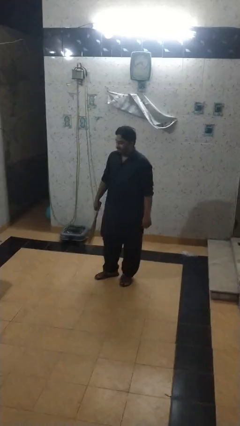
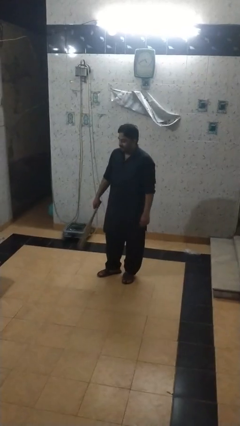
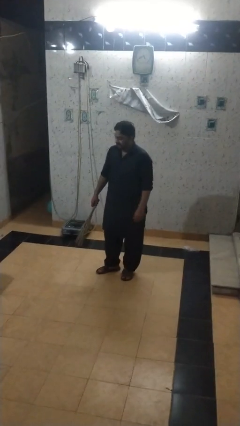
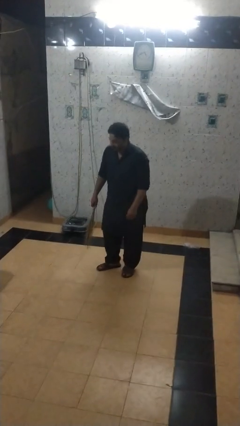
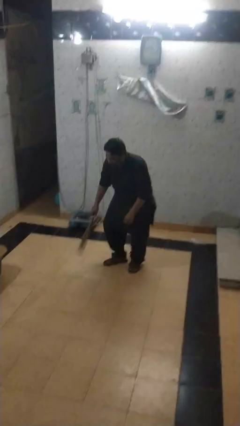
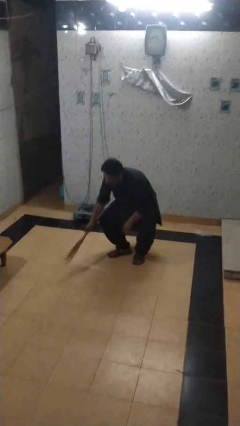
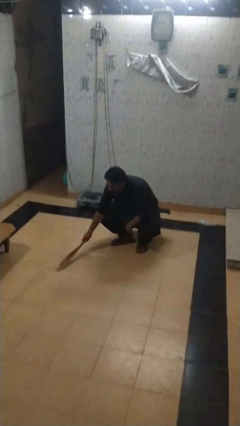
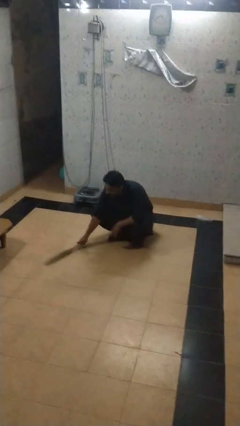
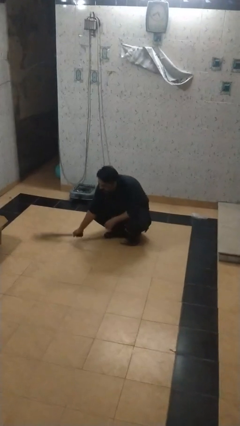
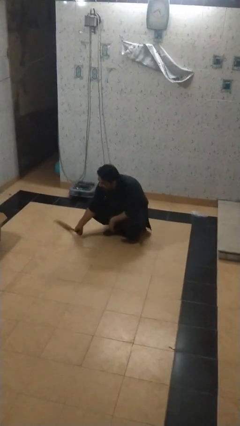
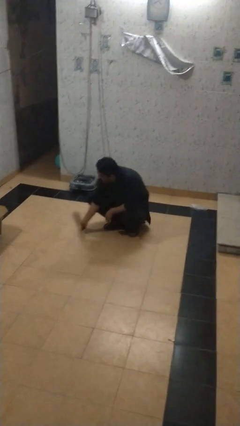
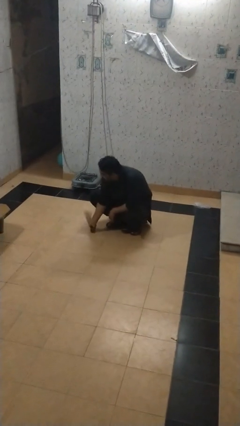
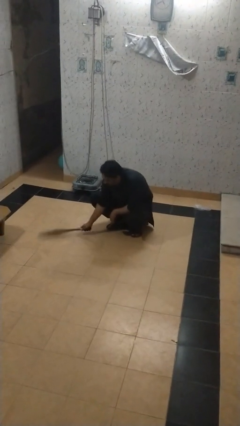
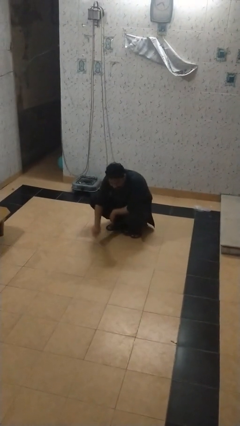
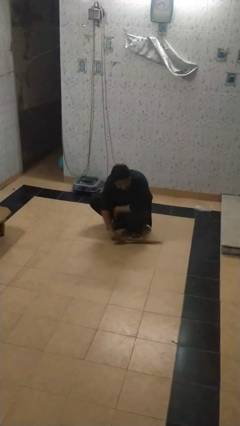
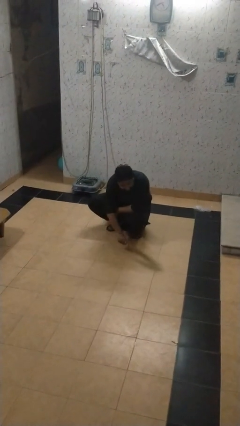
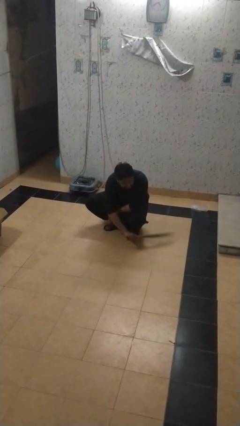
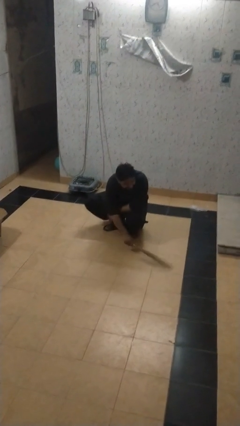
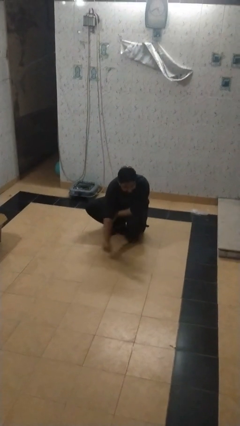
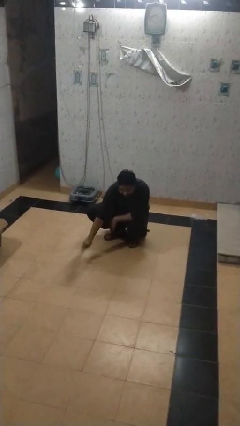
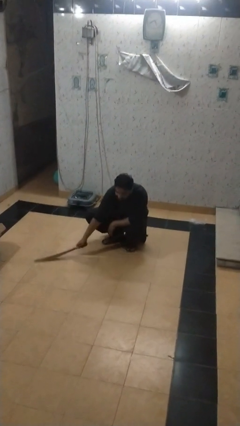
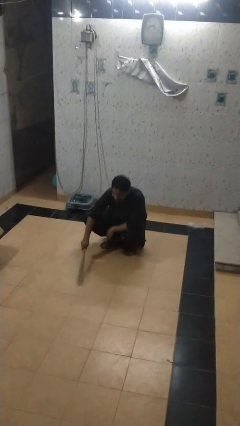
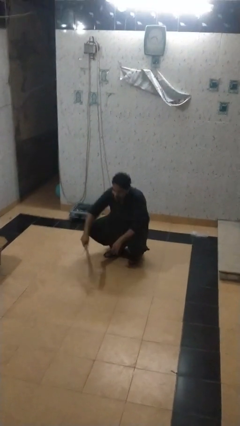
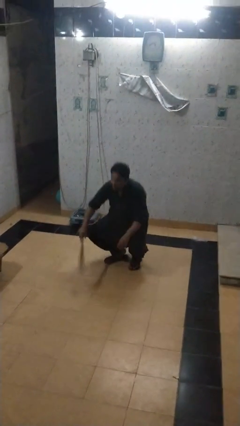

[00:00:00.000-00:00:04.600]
person sweeps floor

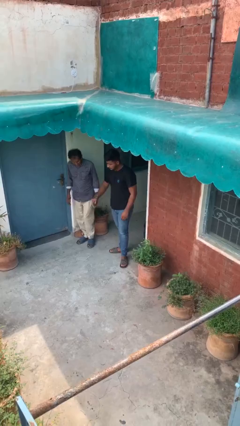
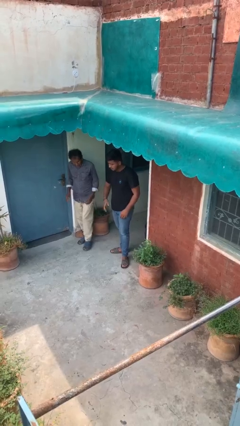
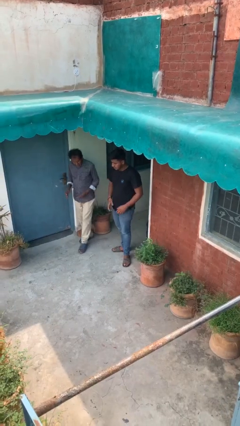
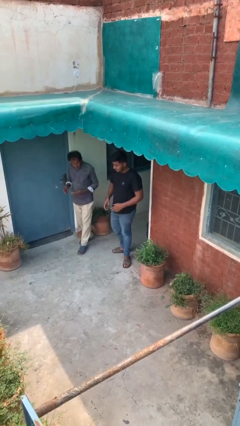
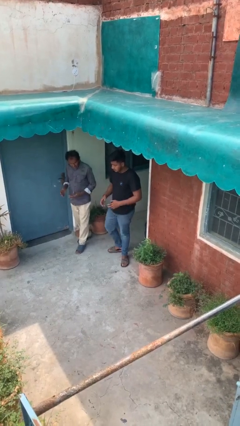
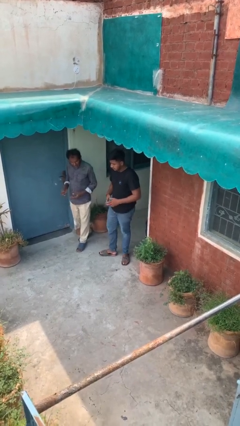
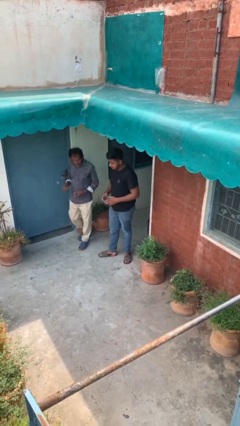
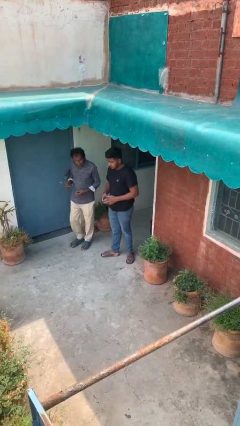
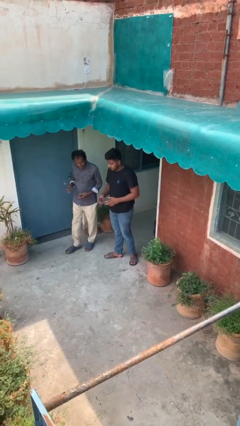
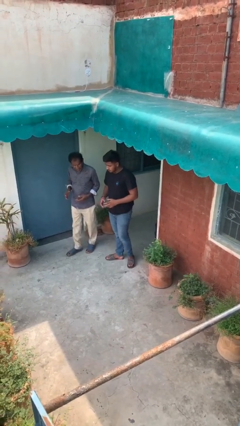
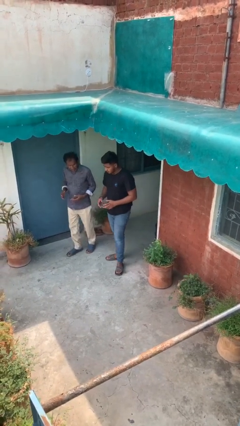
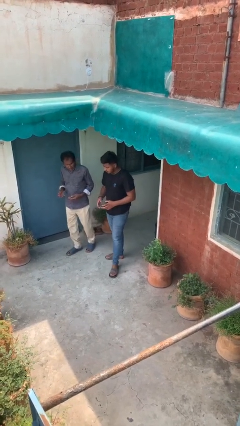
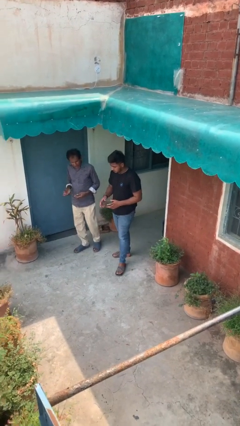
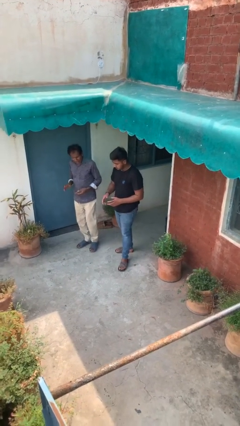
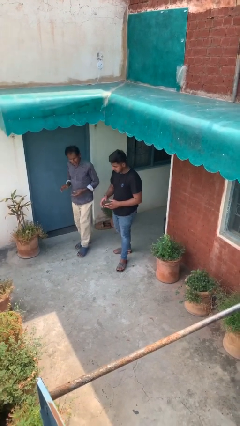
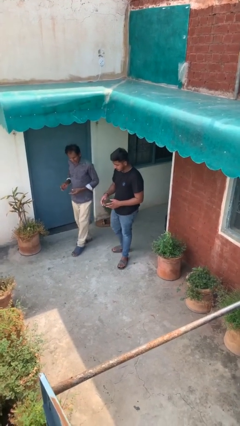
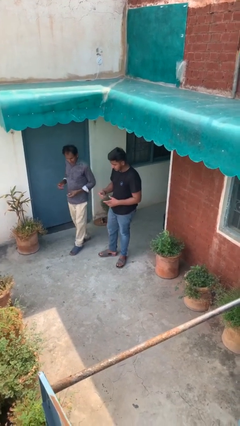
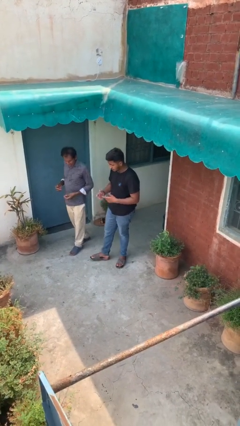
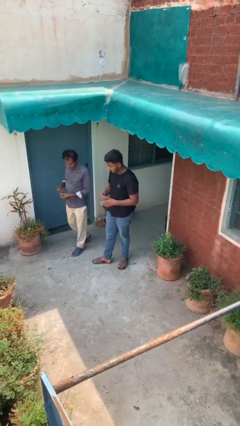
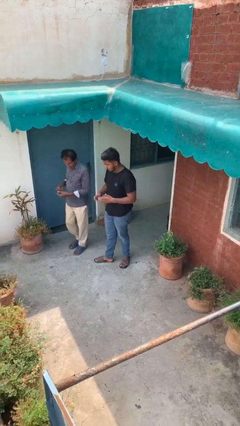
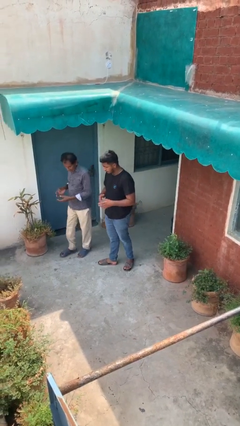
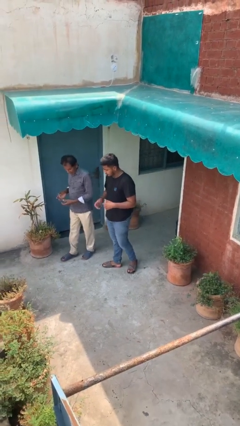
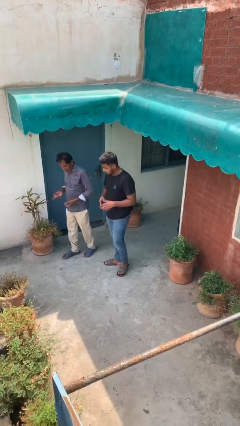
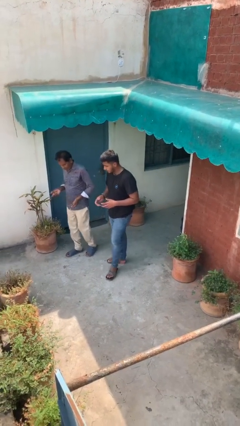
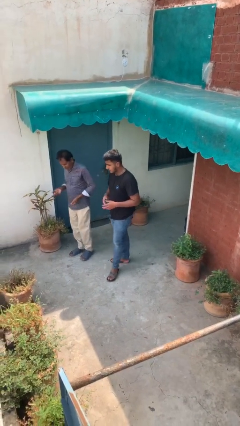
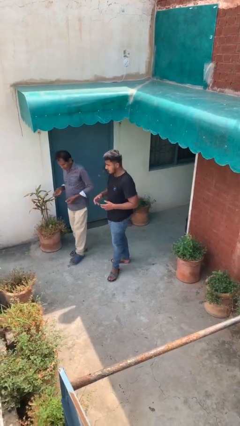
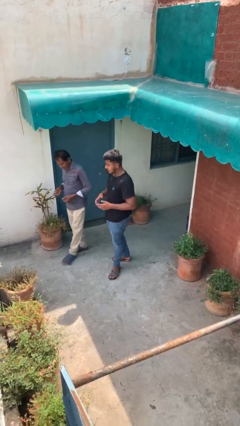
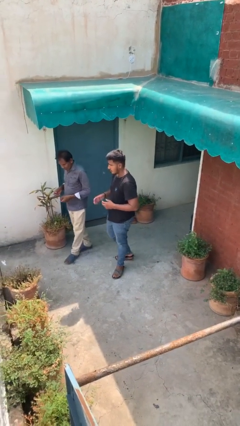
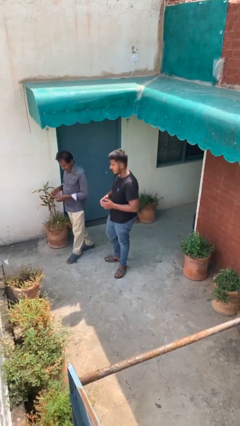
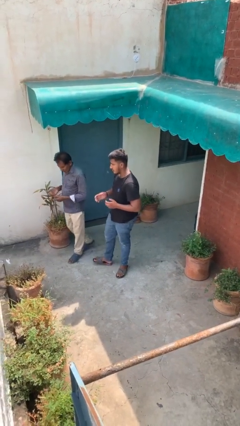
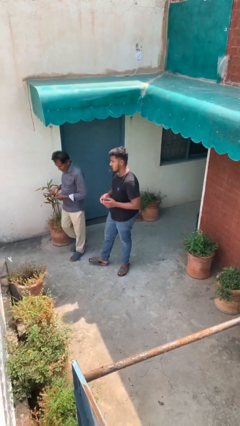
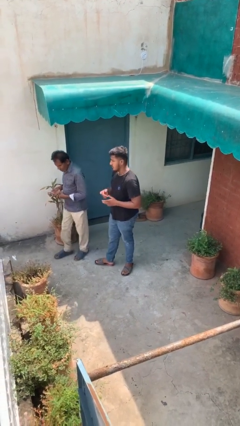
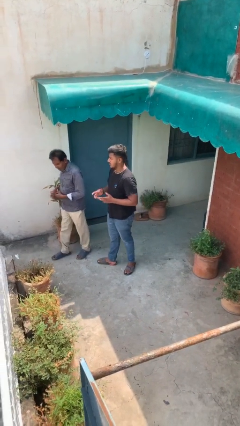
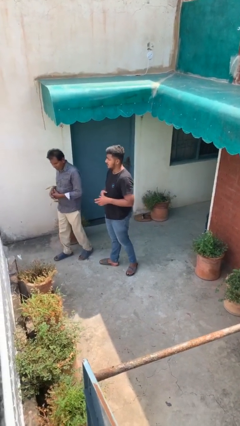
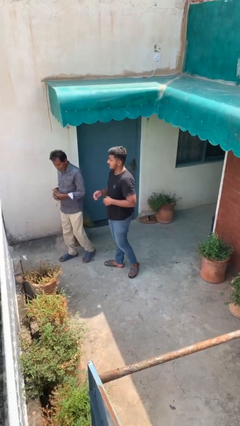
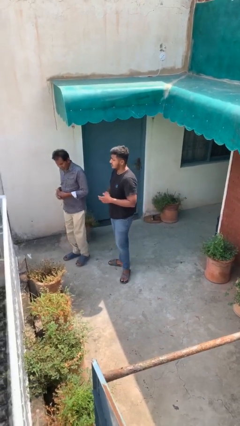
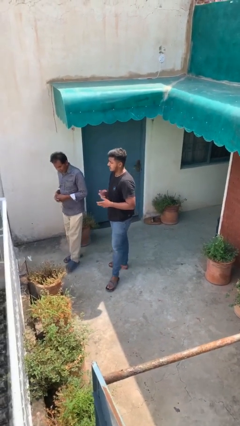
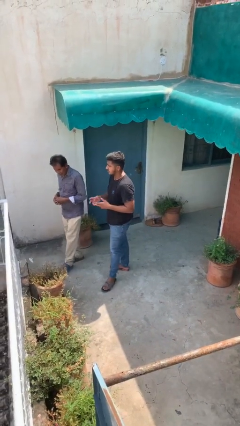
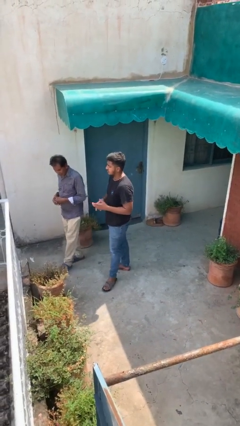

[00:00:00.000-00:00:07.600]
person talks to person

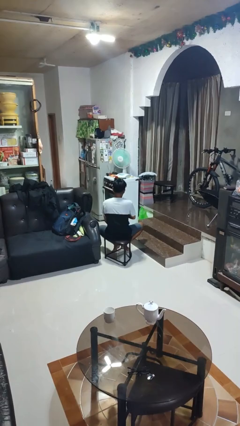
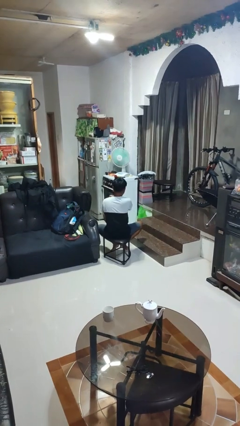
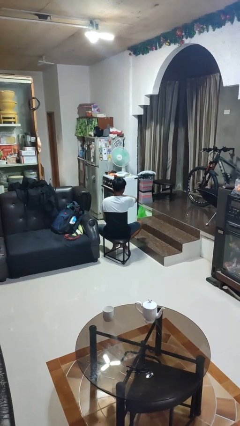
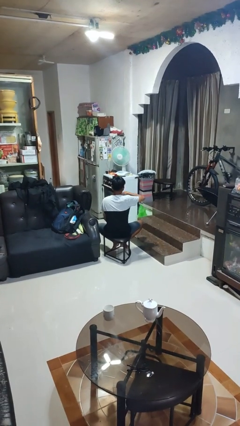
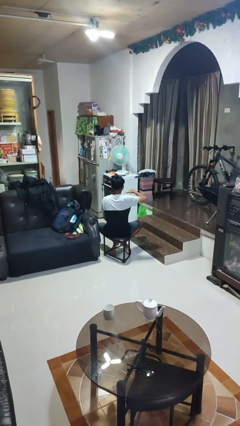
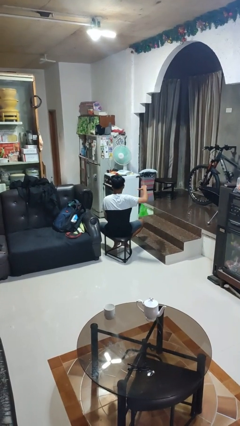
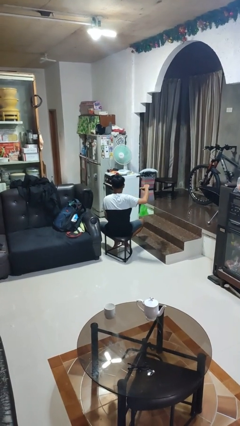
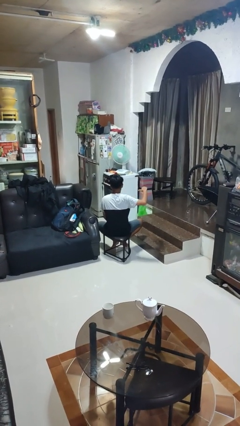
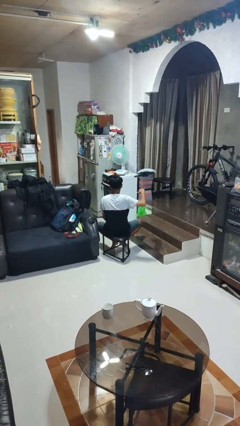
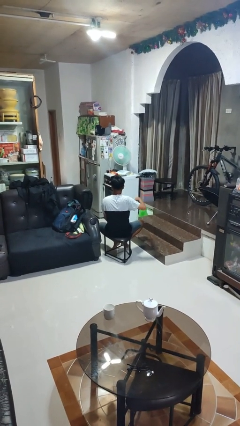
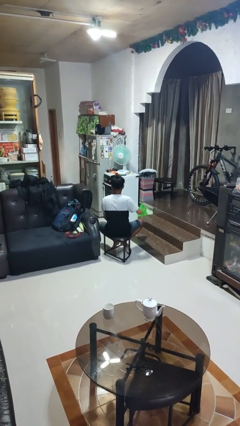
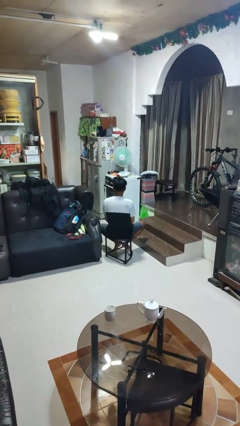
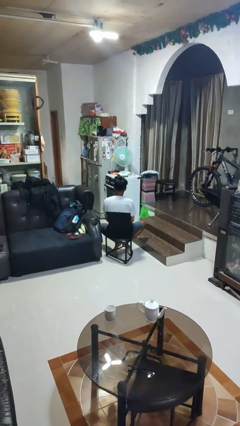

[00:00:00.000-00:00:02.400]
person gestures cut

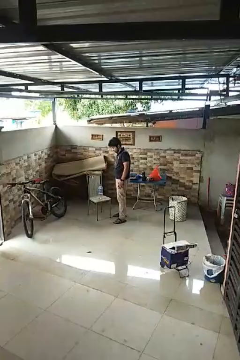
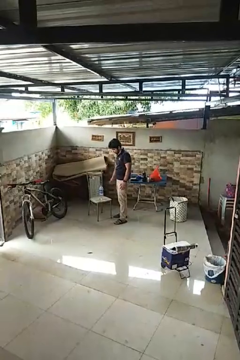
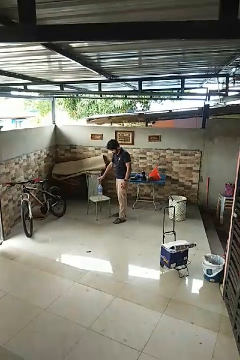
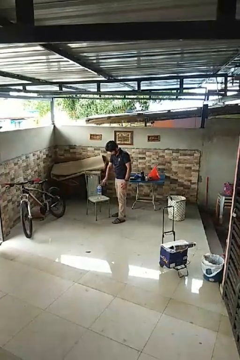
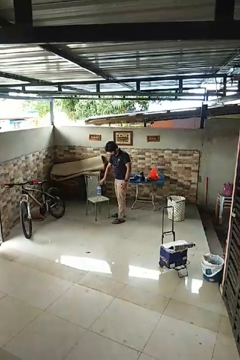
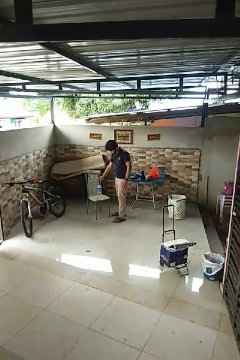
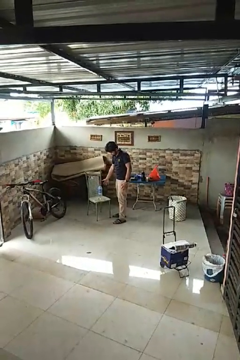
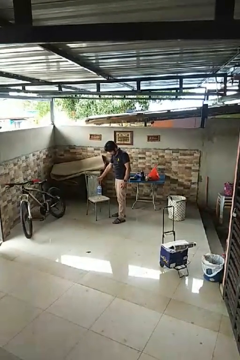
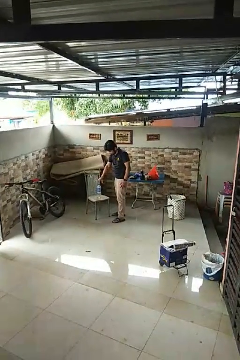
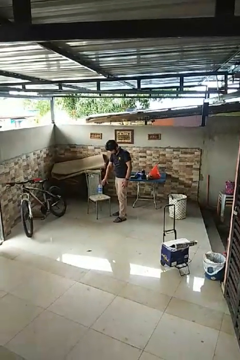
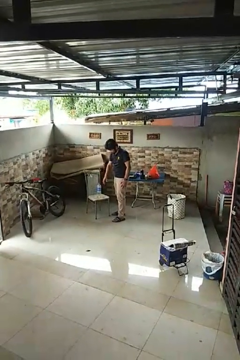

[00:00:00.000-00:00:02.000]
person waves hand over object

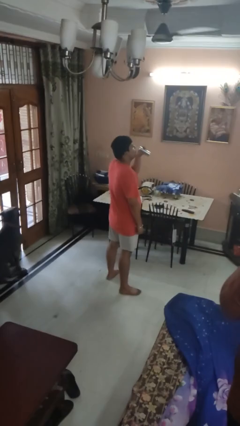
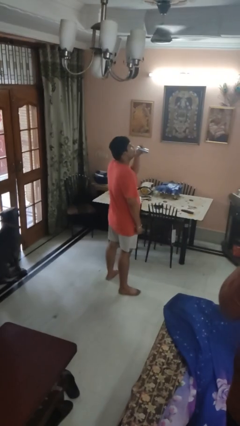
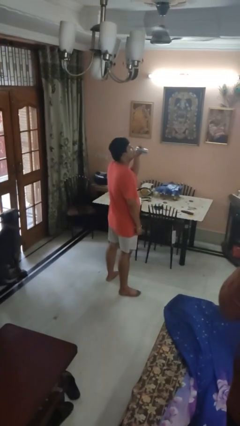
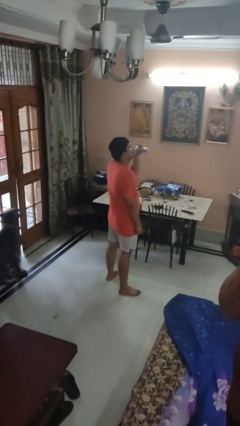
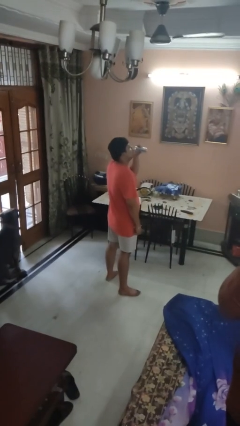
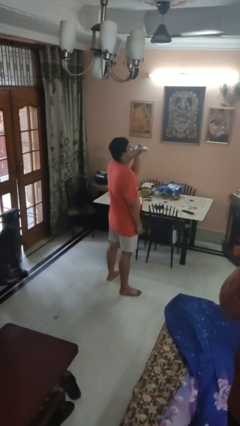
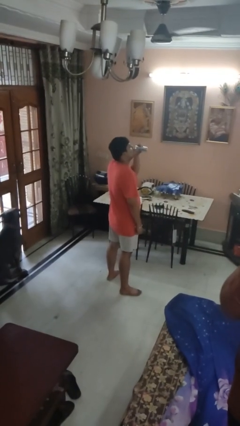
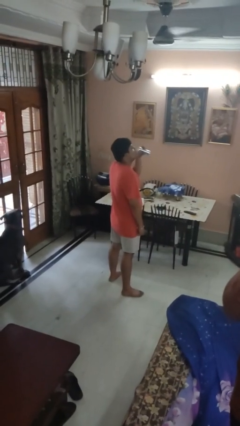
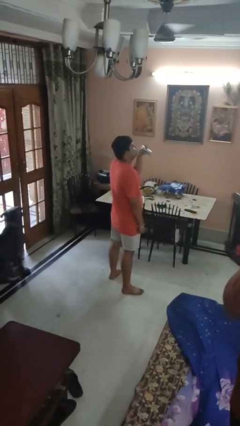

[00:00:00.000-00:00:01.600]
person drinks from beverage can
